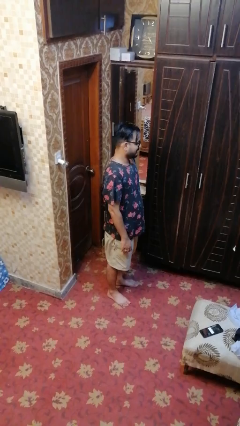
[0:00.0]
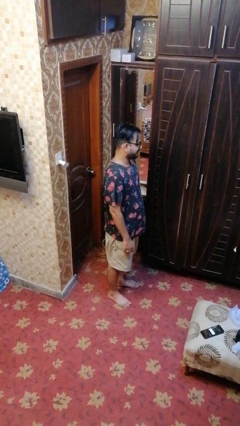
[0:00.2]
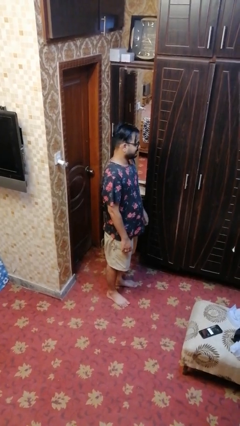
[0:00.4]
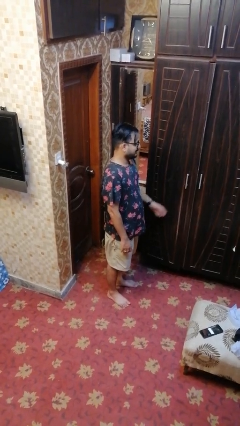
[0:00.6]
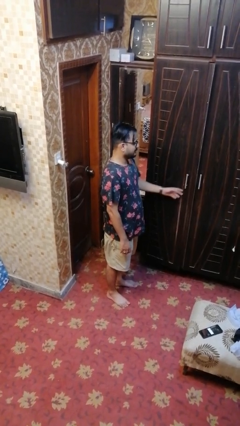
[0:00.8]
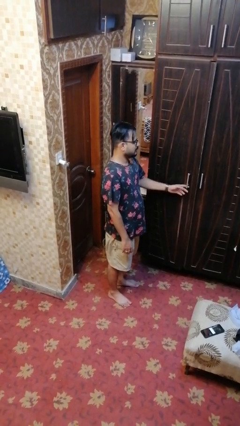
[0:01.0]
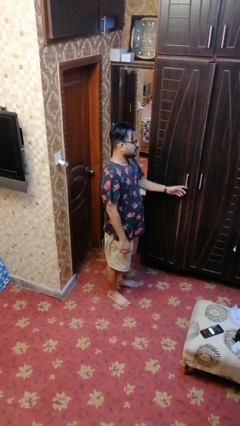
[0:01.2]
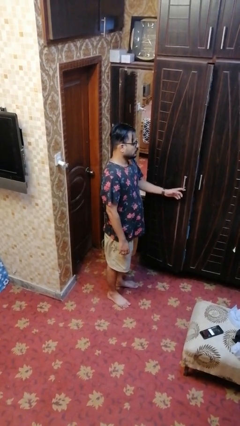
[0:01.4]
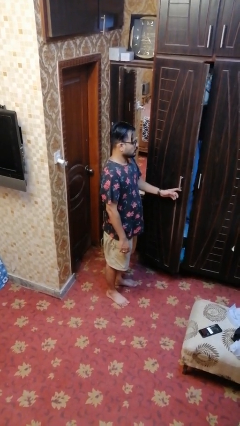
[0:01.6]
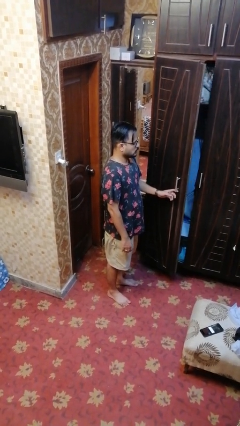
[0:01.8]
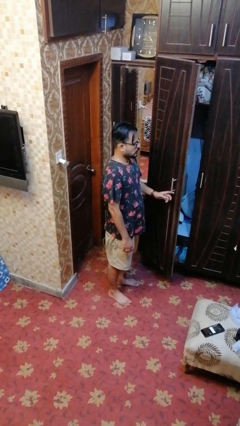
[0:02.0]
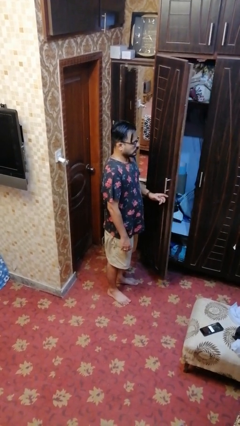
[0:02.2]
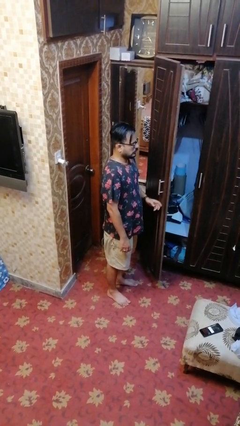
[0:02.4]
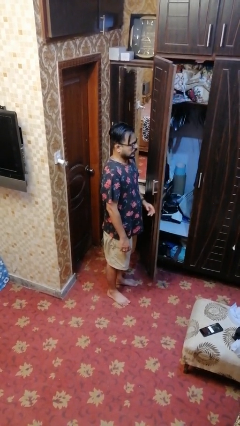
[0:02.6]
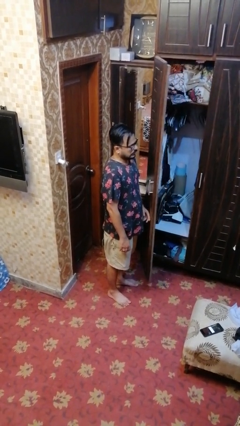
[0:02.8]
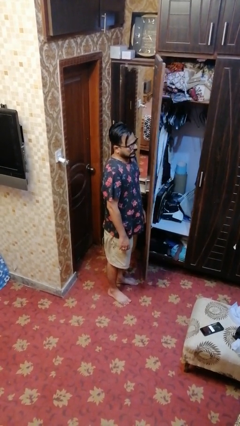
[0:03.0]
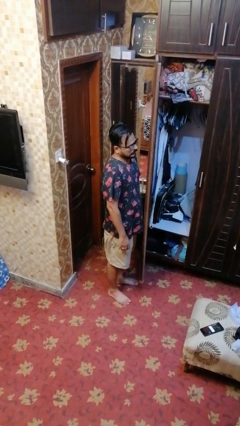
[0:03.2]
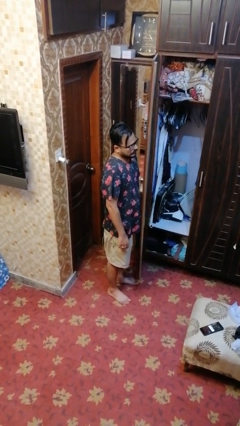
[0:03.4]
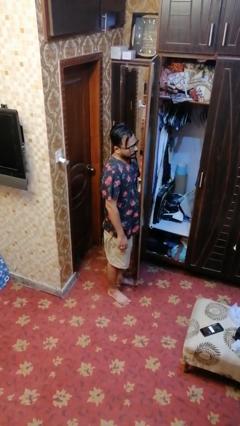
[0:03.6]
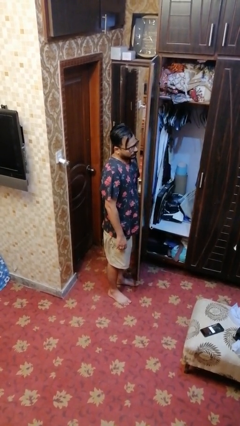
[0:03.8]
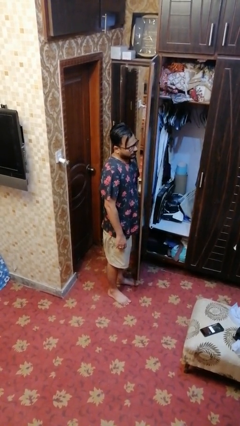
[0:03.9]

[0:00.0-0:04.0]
person opens closet door

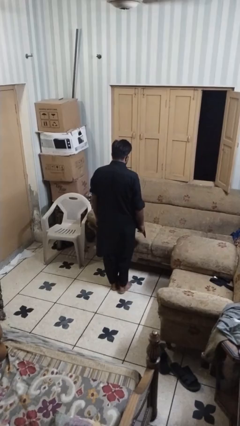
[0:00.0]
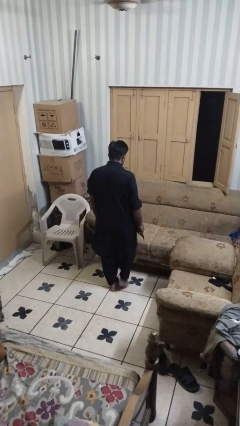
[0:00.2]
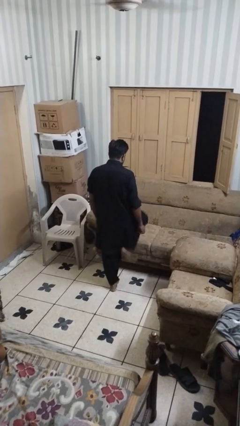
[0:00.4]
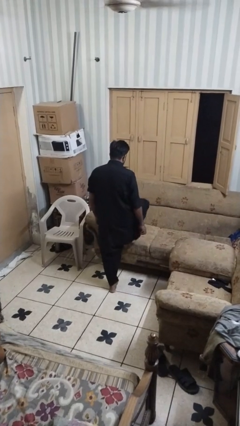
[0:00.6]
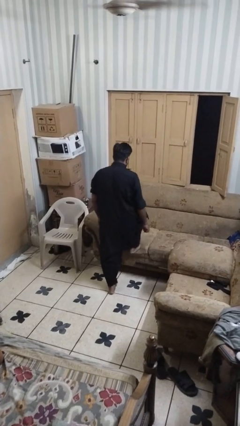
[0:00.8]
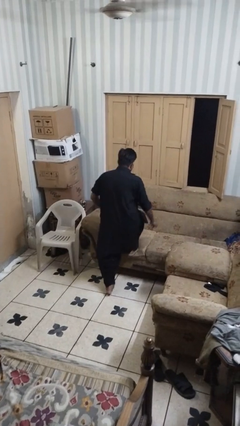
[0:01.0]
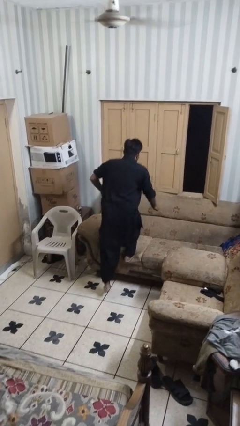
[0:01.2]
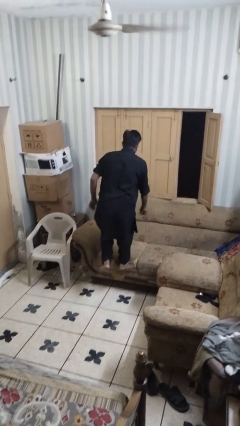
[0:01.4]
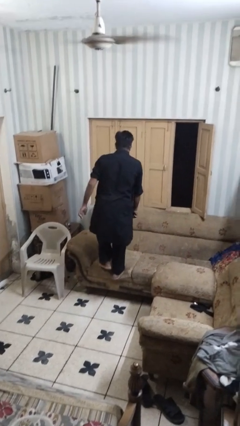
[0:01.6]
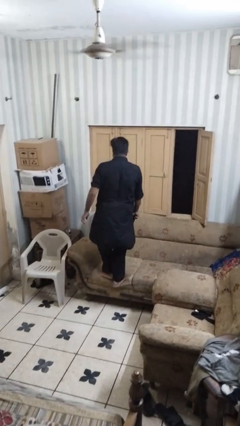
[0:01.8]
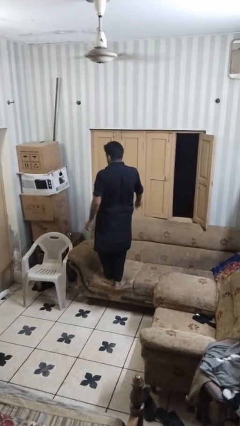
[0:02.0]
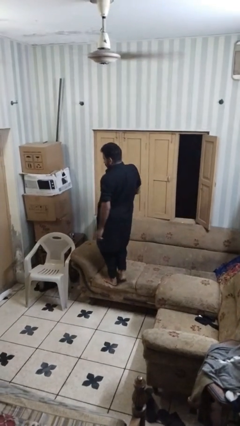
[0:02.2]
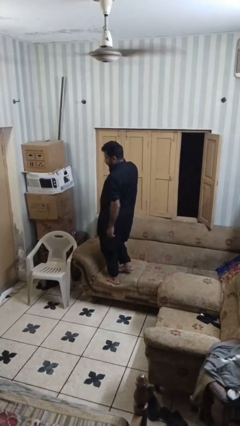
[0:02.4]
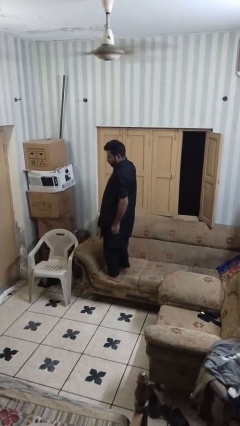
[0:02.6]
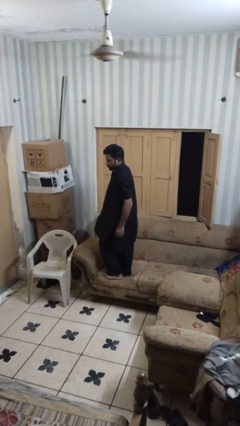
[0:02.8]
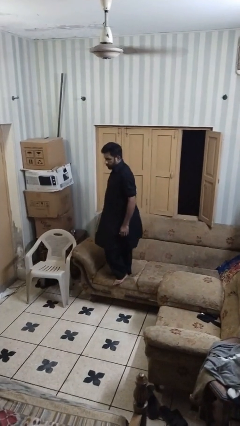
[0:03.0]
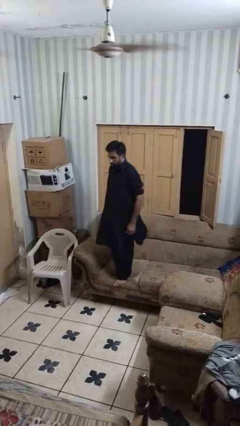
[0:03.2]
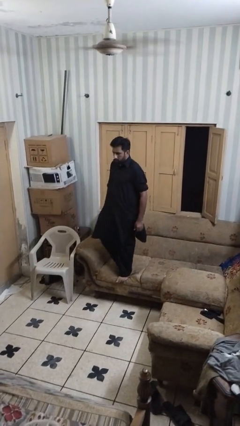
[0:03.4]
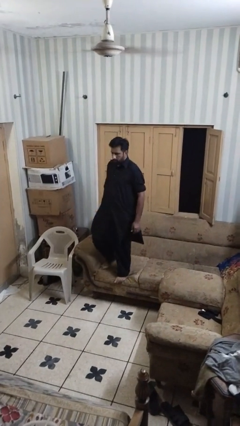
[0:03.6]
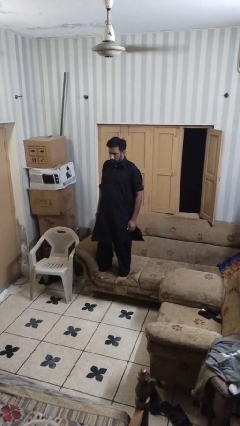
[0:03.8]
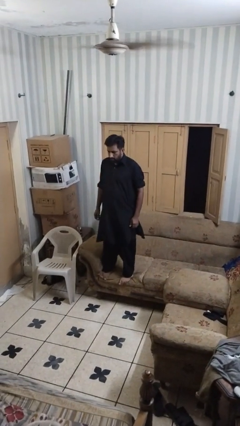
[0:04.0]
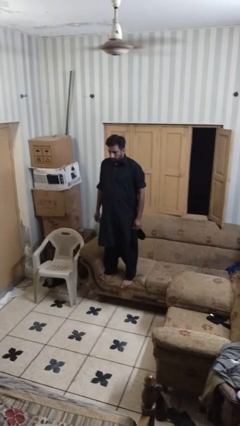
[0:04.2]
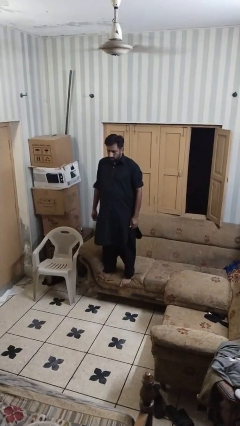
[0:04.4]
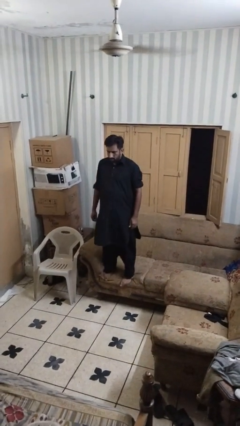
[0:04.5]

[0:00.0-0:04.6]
person climbs on couch

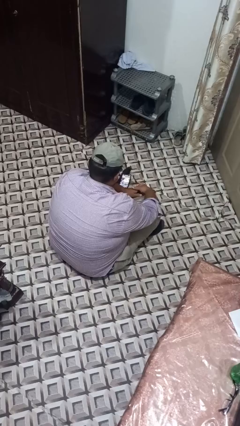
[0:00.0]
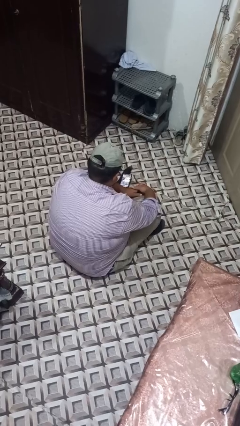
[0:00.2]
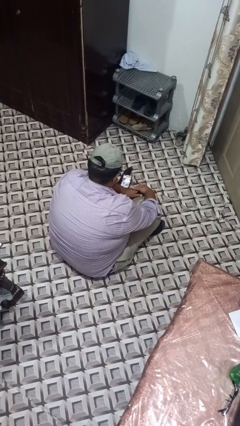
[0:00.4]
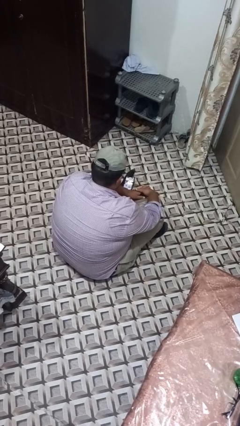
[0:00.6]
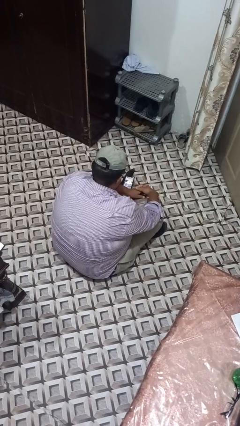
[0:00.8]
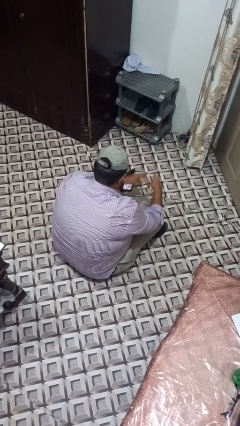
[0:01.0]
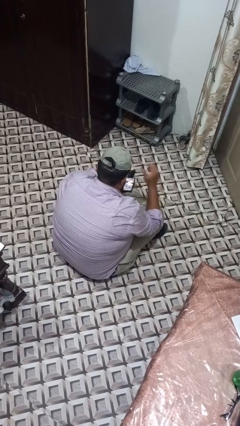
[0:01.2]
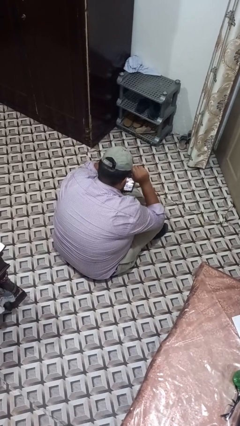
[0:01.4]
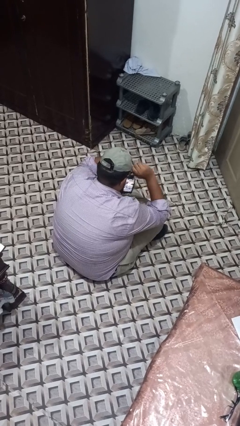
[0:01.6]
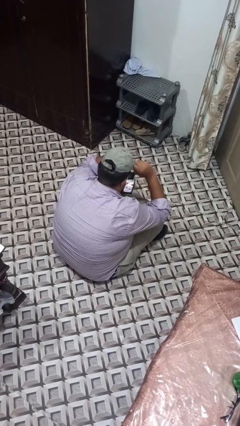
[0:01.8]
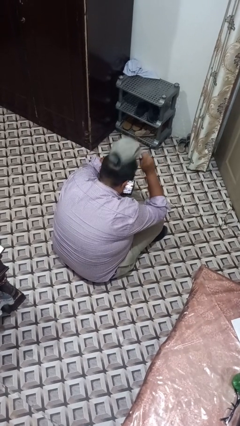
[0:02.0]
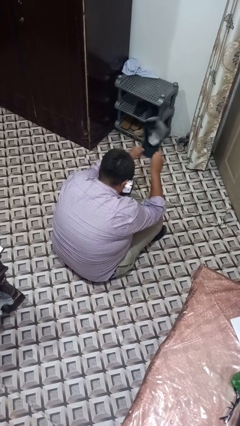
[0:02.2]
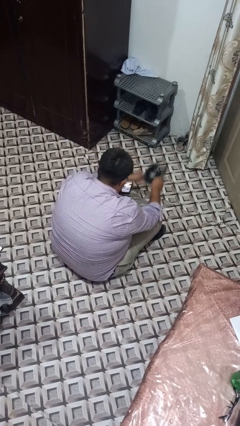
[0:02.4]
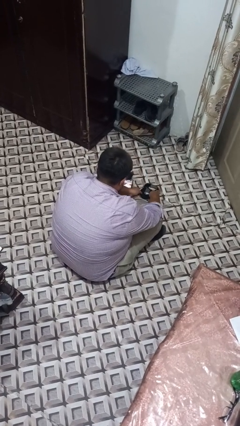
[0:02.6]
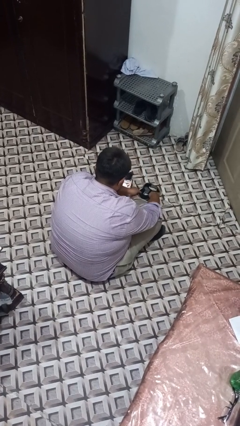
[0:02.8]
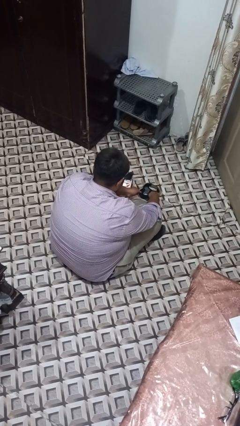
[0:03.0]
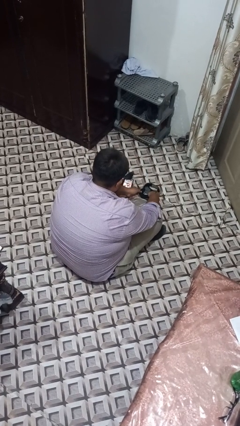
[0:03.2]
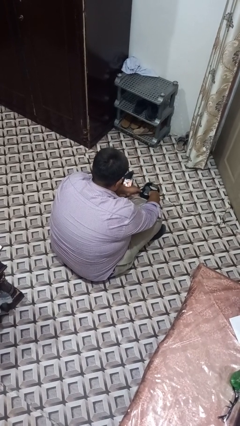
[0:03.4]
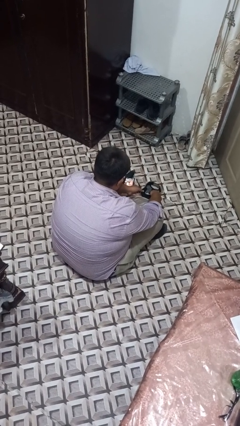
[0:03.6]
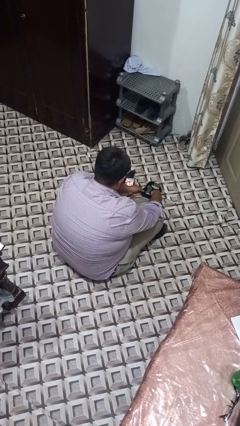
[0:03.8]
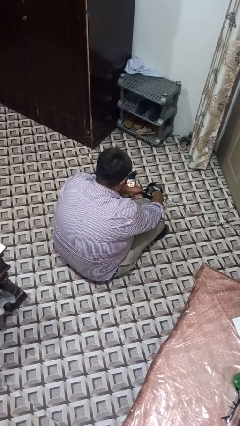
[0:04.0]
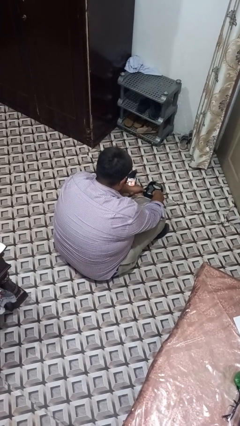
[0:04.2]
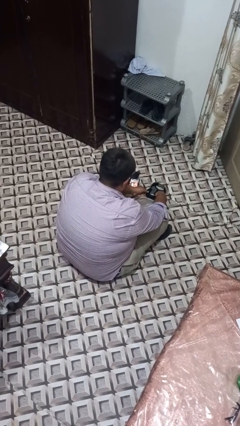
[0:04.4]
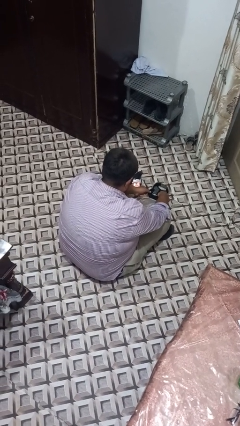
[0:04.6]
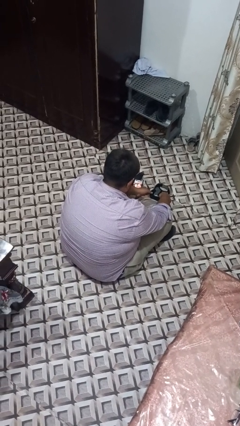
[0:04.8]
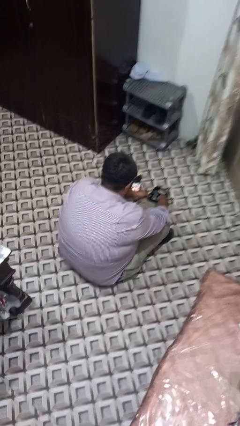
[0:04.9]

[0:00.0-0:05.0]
person takes off hat

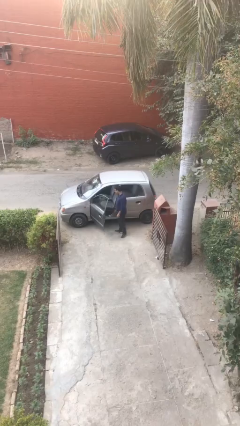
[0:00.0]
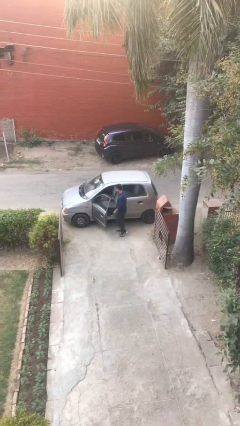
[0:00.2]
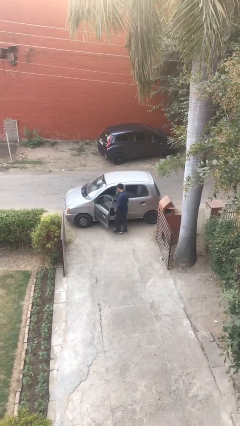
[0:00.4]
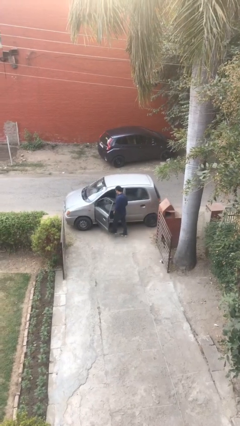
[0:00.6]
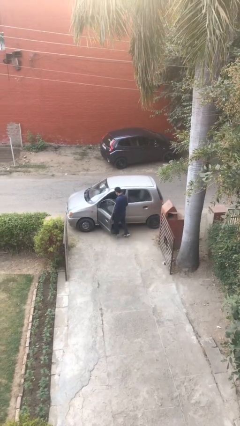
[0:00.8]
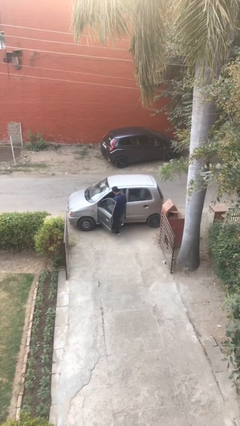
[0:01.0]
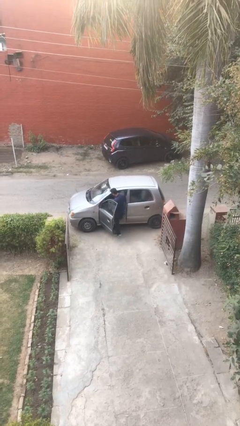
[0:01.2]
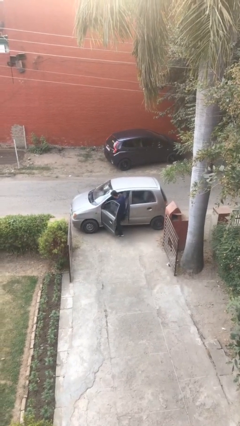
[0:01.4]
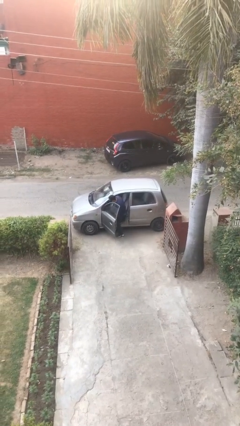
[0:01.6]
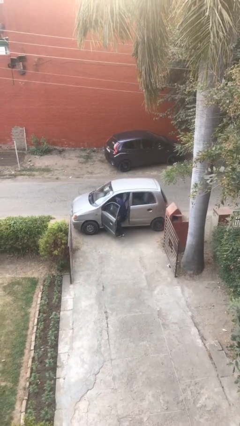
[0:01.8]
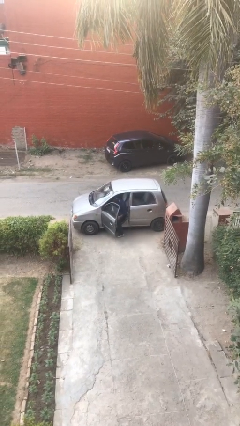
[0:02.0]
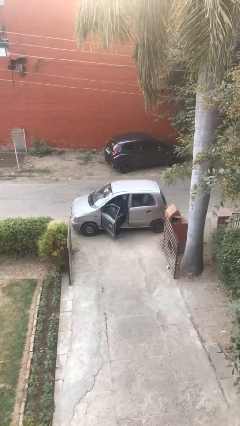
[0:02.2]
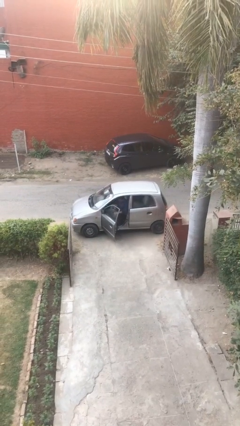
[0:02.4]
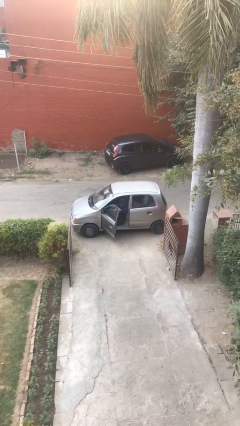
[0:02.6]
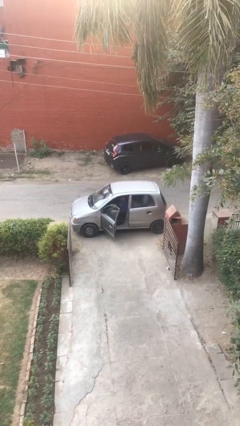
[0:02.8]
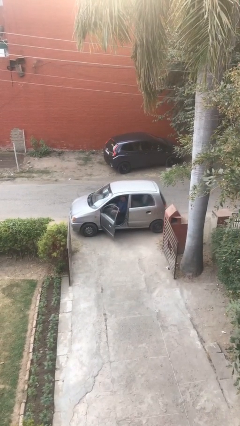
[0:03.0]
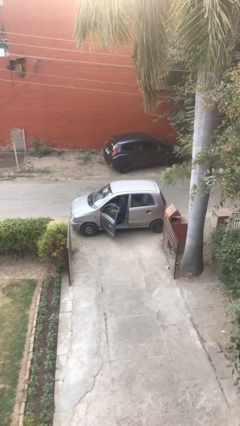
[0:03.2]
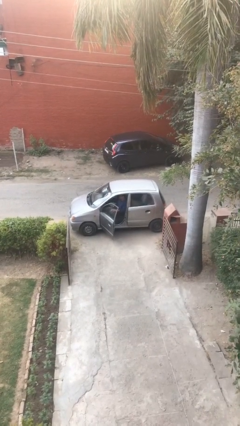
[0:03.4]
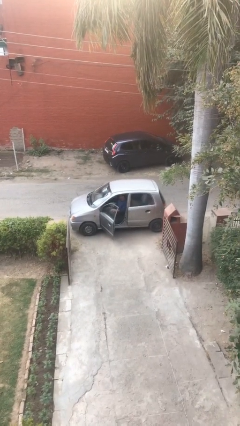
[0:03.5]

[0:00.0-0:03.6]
person enters car

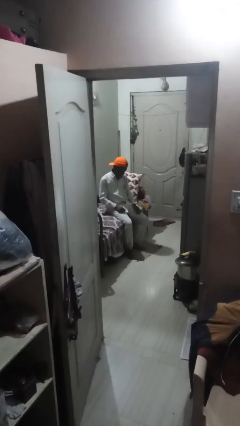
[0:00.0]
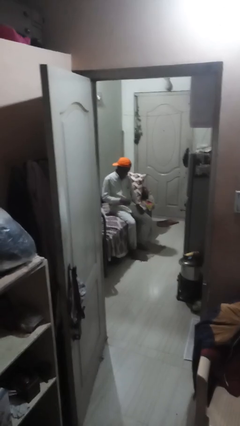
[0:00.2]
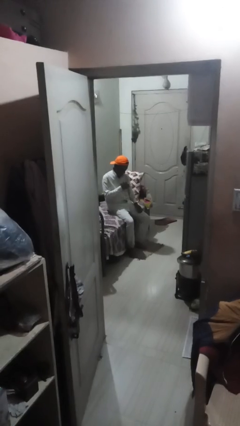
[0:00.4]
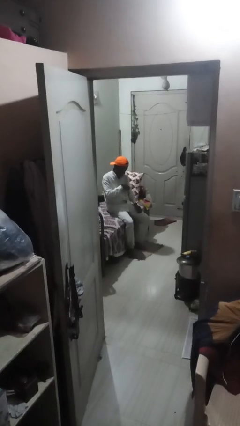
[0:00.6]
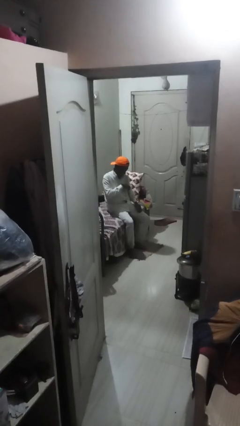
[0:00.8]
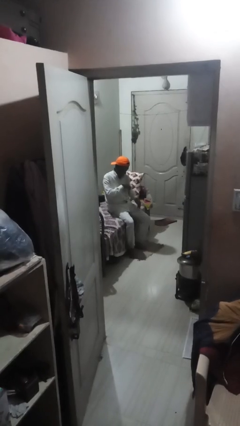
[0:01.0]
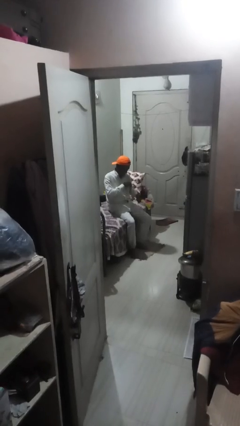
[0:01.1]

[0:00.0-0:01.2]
person takes phone from pocket
